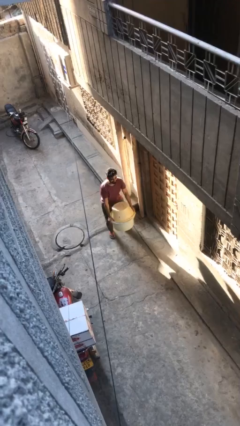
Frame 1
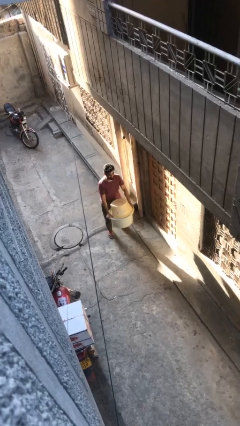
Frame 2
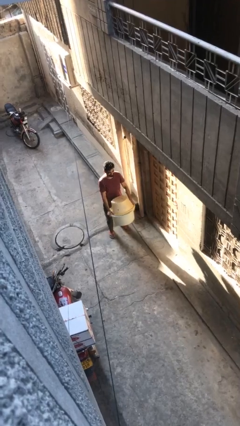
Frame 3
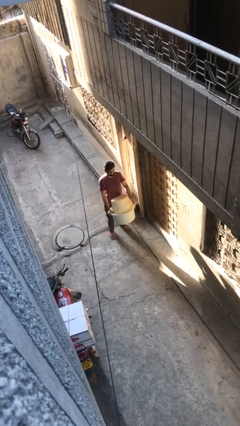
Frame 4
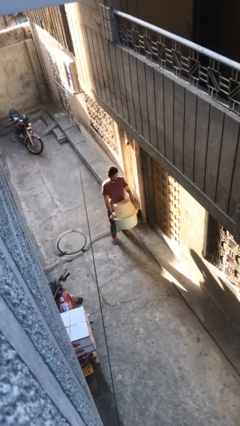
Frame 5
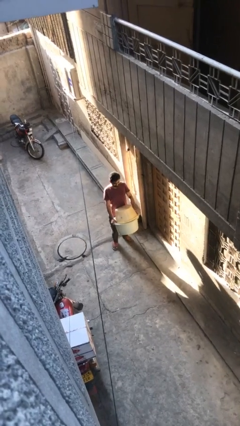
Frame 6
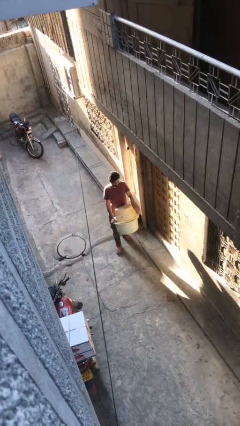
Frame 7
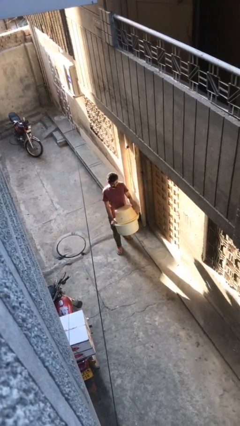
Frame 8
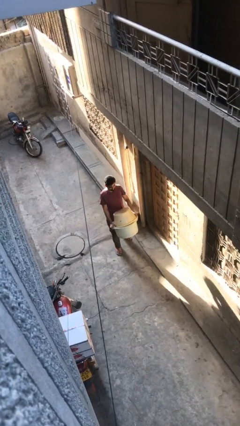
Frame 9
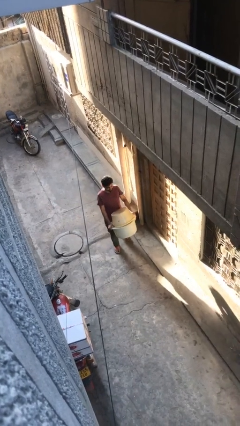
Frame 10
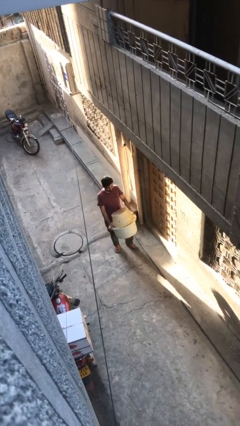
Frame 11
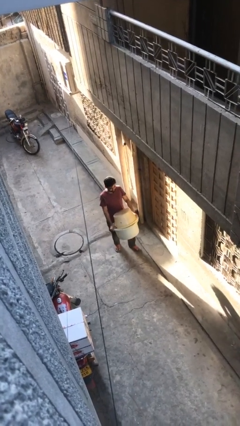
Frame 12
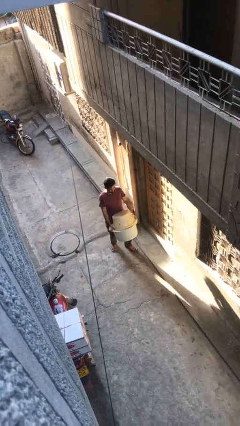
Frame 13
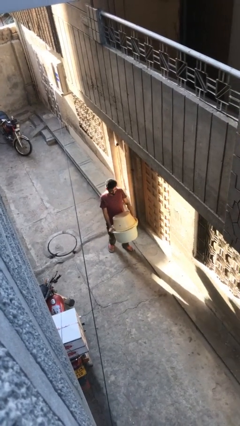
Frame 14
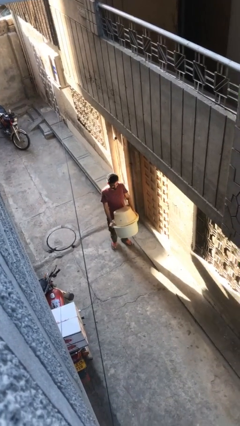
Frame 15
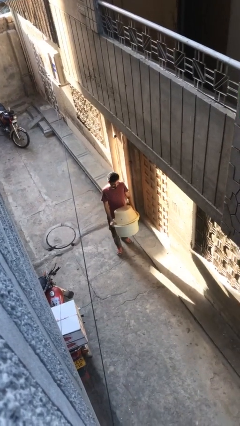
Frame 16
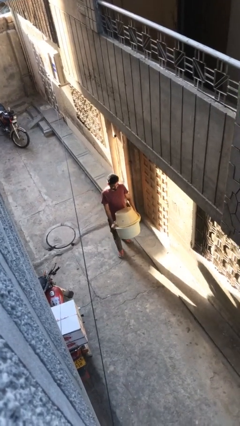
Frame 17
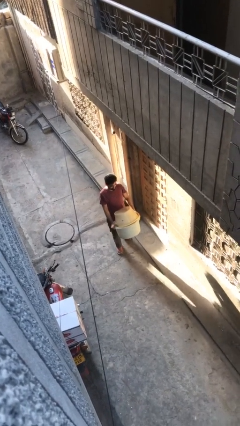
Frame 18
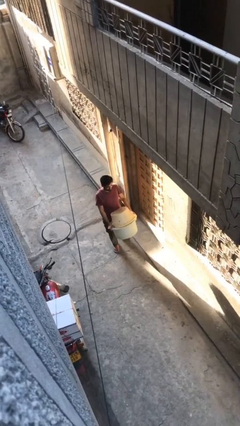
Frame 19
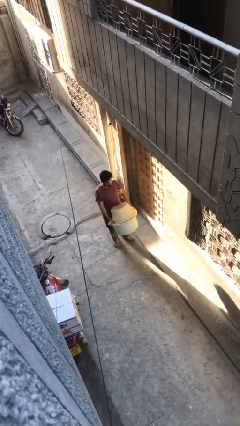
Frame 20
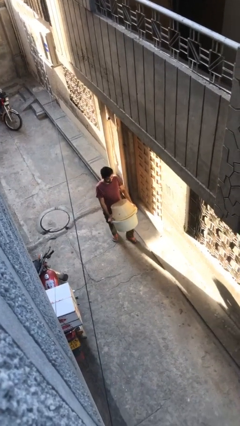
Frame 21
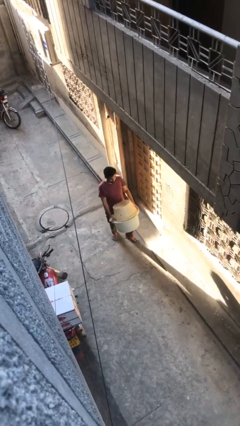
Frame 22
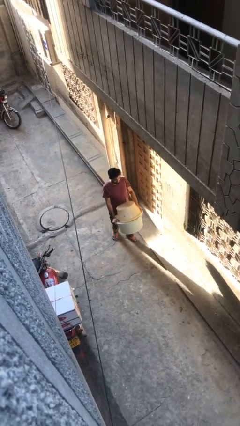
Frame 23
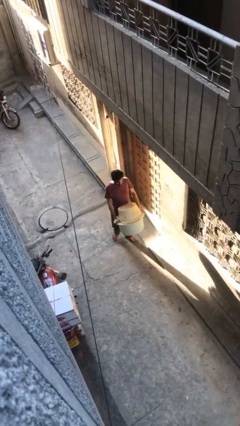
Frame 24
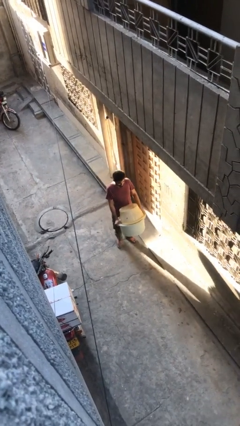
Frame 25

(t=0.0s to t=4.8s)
person carries heavy object

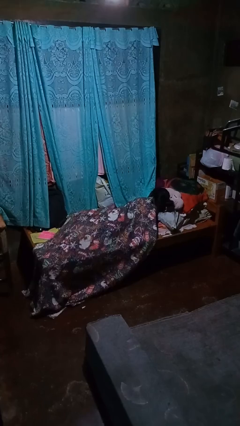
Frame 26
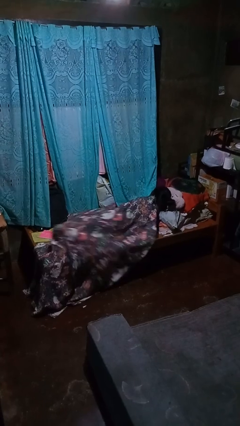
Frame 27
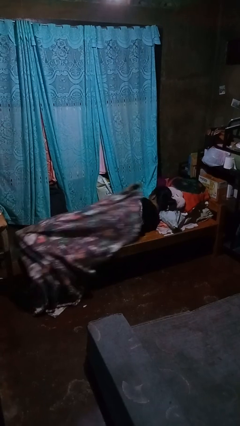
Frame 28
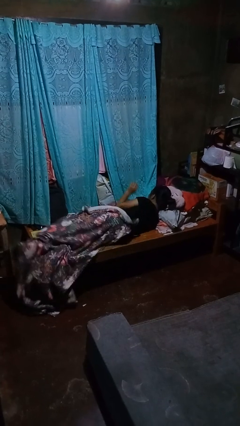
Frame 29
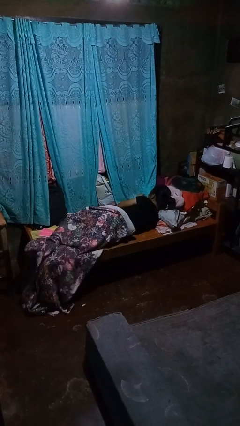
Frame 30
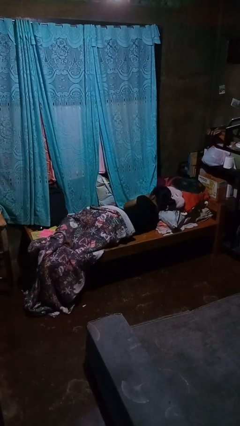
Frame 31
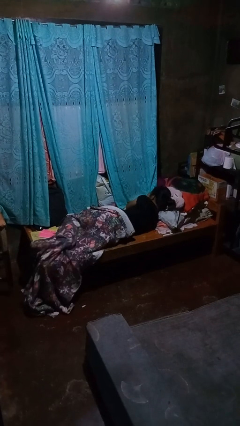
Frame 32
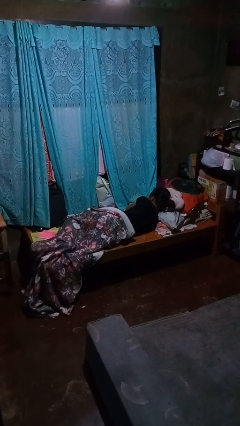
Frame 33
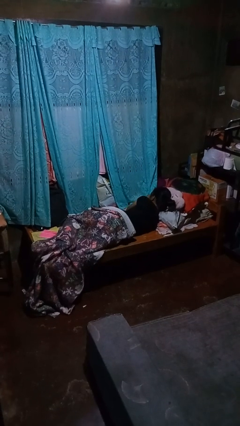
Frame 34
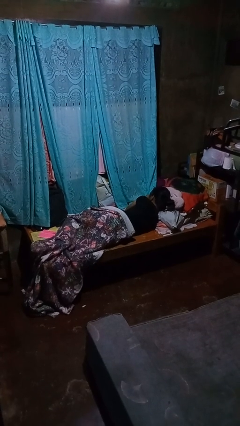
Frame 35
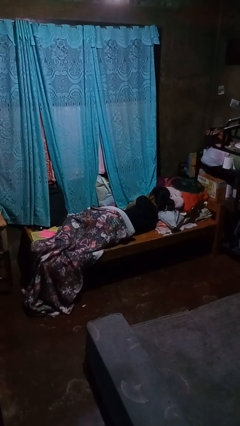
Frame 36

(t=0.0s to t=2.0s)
person uncovers with bedsheets

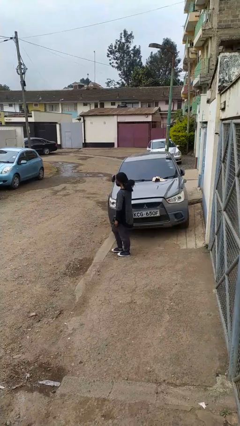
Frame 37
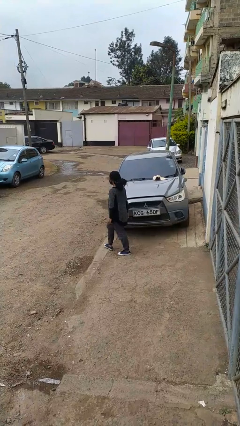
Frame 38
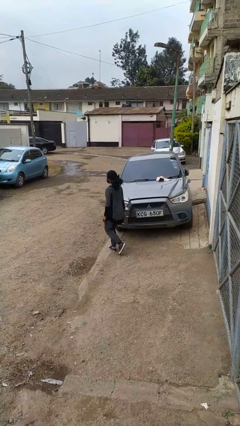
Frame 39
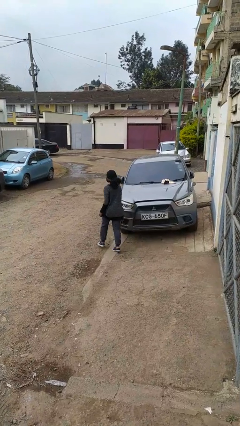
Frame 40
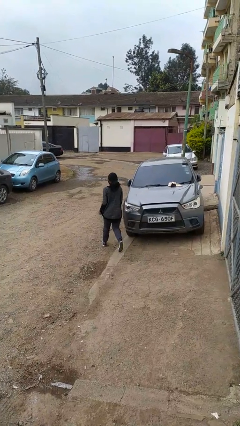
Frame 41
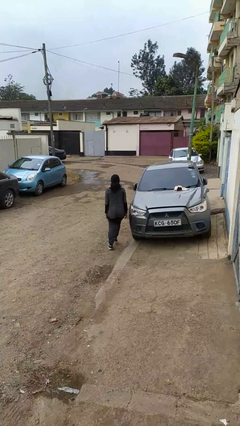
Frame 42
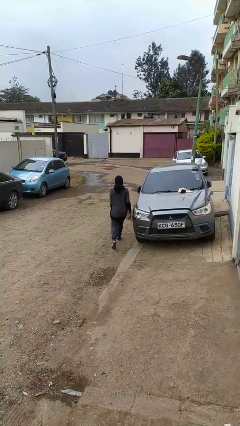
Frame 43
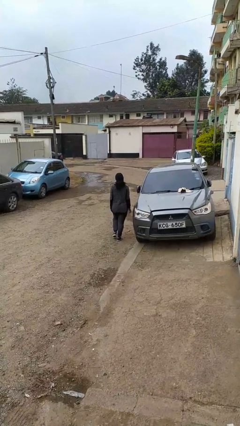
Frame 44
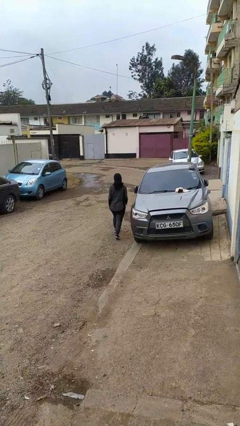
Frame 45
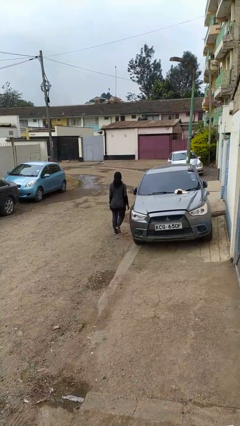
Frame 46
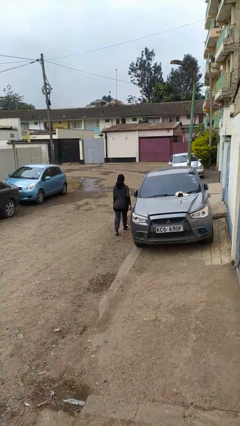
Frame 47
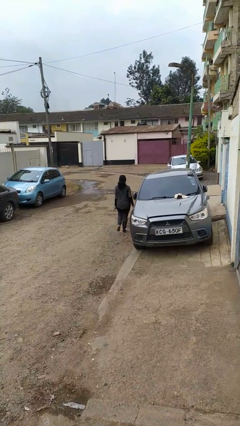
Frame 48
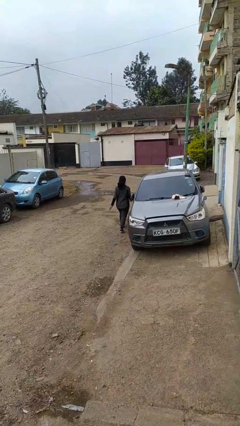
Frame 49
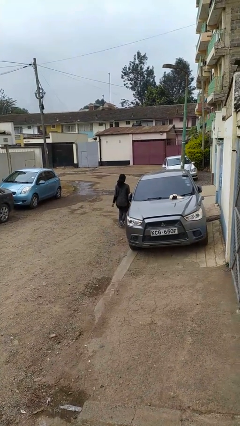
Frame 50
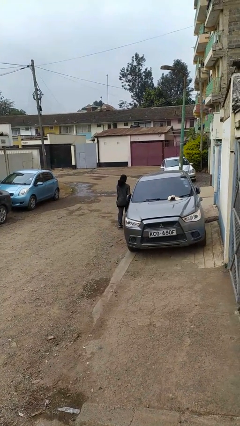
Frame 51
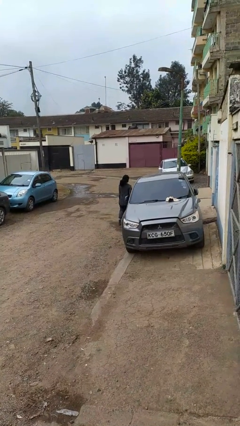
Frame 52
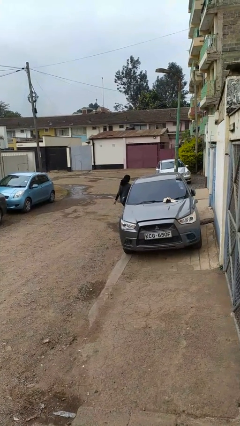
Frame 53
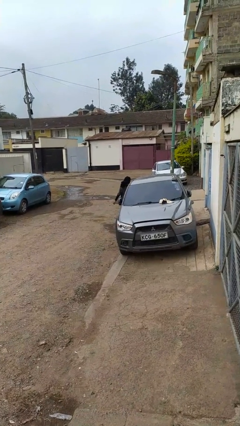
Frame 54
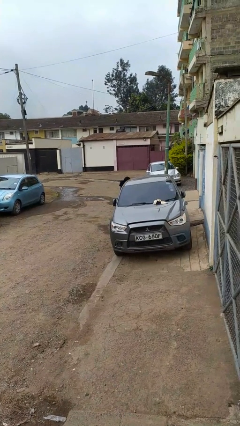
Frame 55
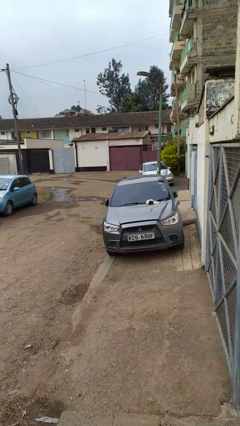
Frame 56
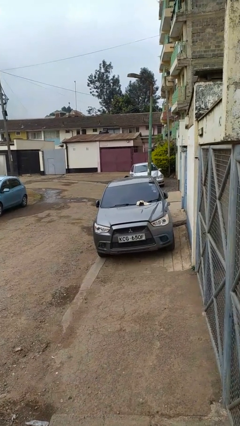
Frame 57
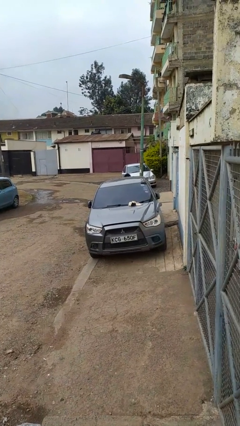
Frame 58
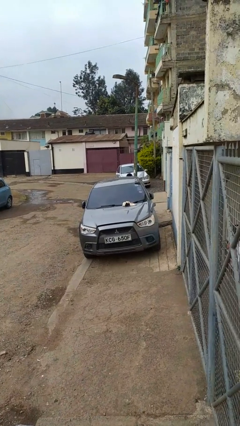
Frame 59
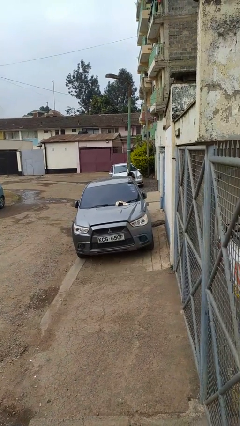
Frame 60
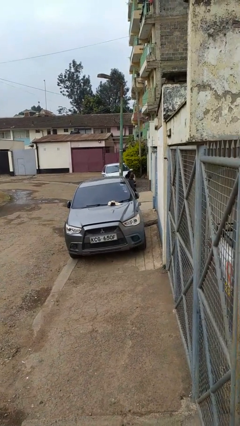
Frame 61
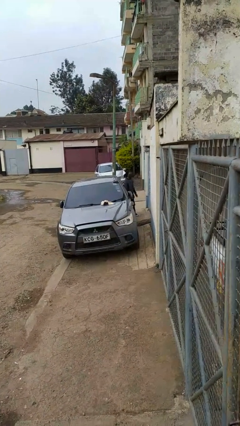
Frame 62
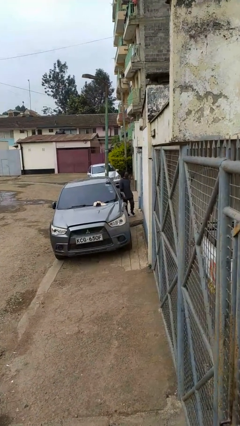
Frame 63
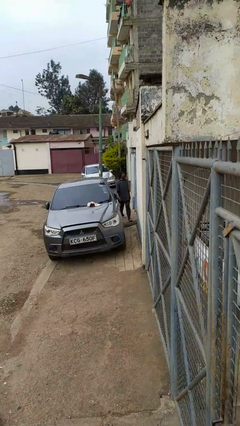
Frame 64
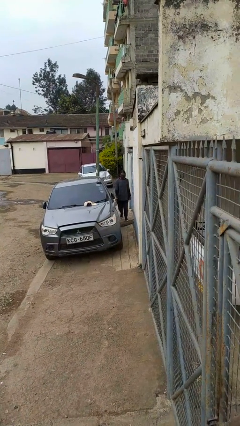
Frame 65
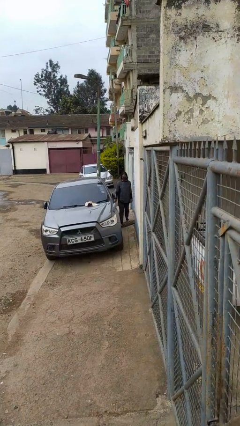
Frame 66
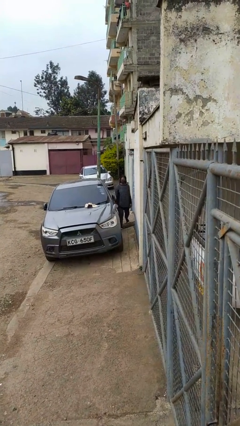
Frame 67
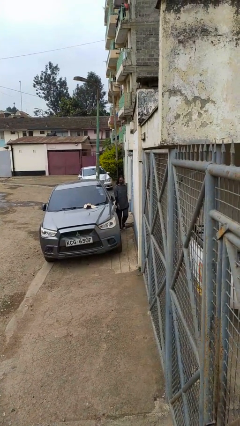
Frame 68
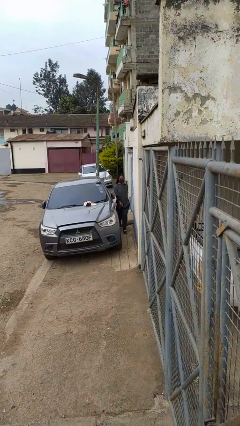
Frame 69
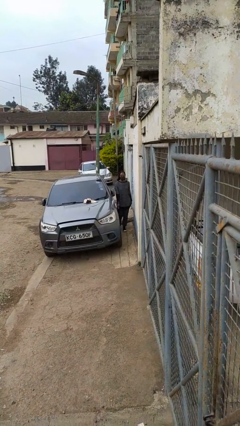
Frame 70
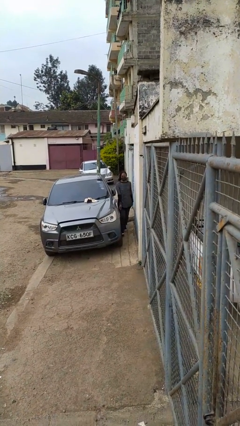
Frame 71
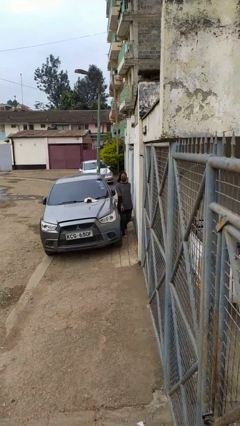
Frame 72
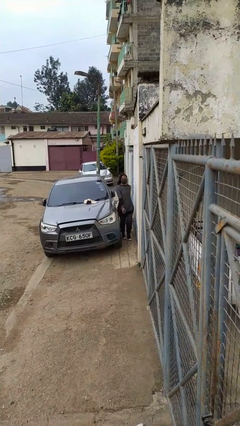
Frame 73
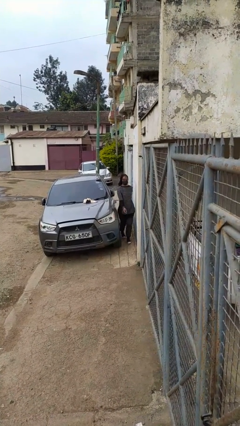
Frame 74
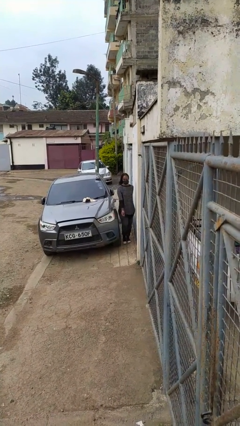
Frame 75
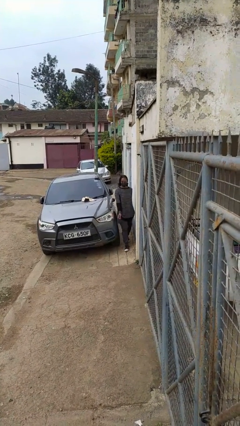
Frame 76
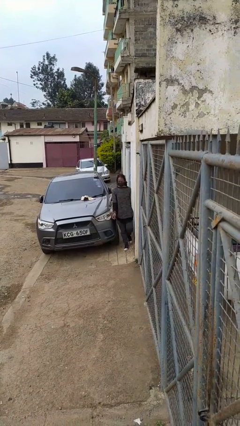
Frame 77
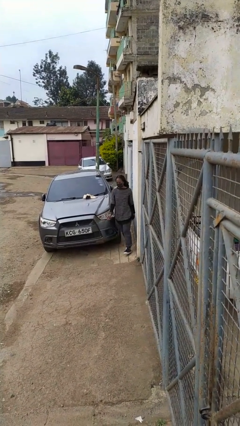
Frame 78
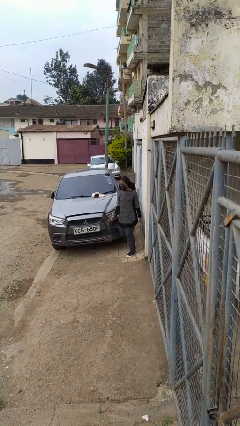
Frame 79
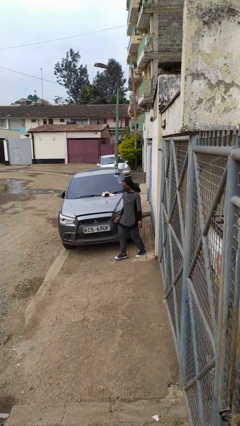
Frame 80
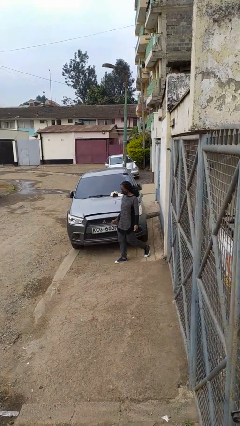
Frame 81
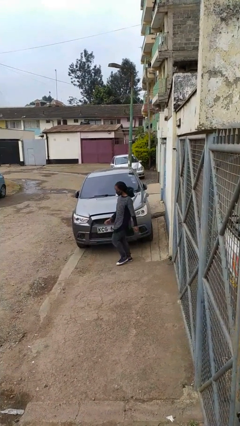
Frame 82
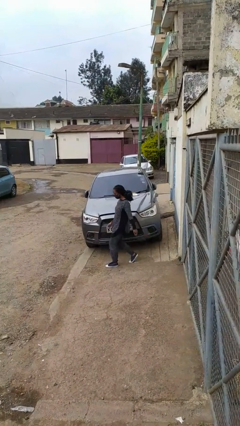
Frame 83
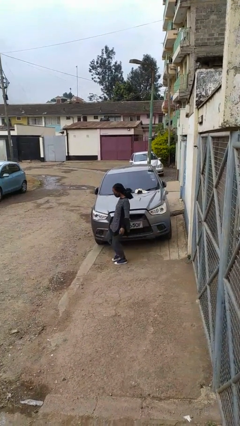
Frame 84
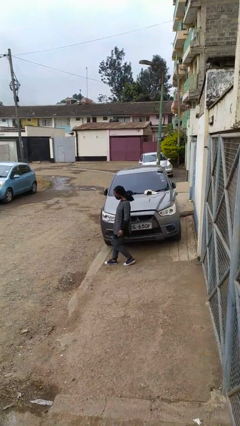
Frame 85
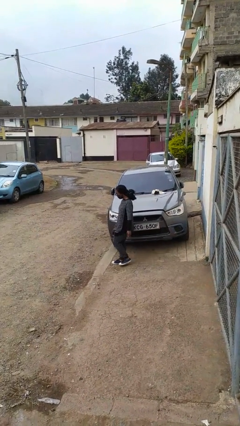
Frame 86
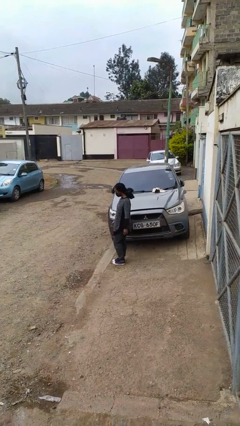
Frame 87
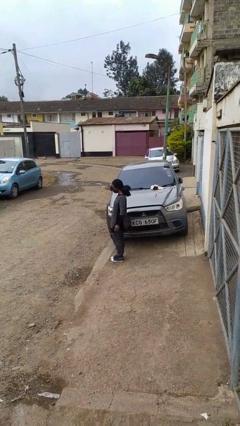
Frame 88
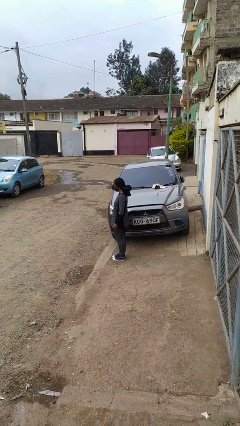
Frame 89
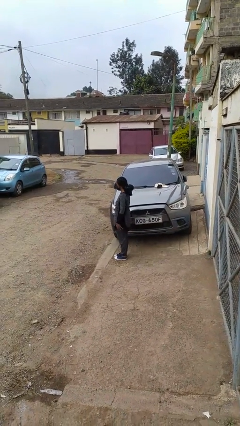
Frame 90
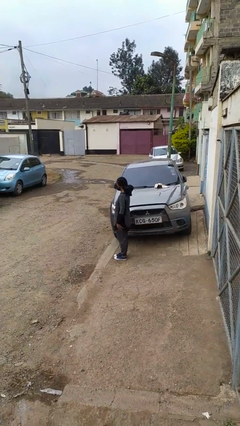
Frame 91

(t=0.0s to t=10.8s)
person walks around car

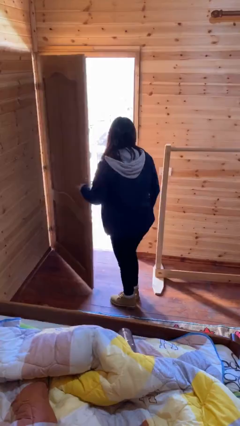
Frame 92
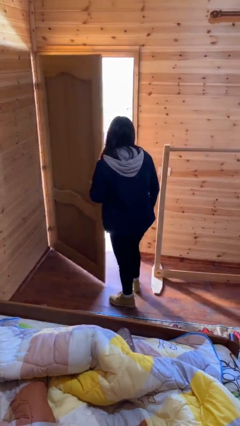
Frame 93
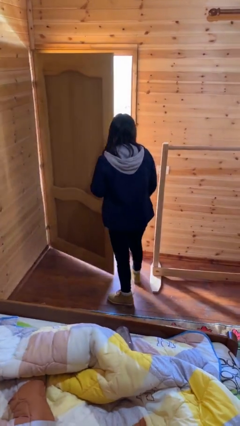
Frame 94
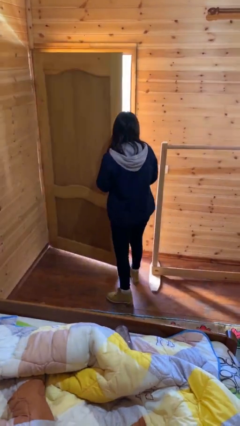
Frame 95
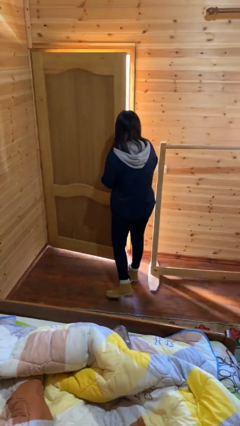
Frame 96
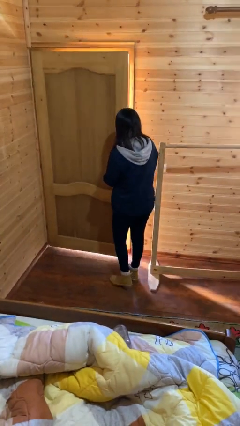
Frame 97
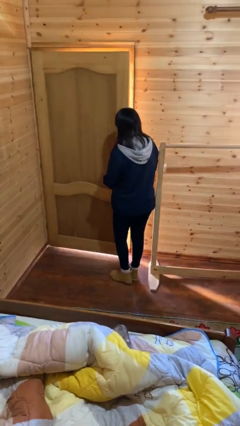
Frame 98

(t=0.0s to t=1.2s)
person closes facility door
